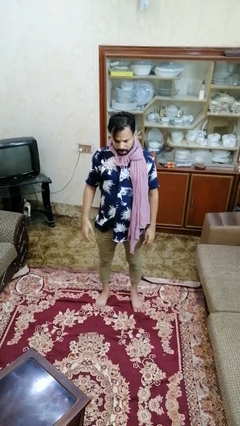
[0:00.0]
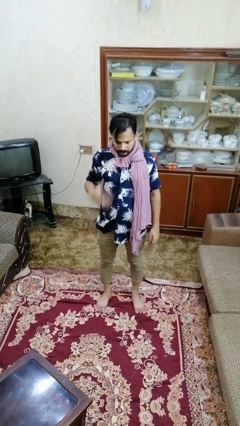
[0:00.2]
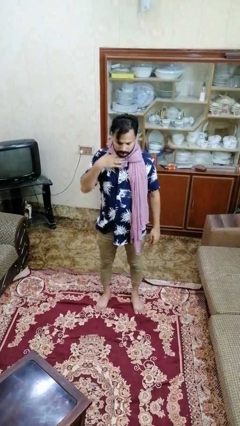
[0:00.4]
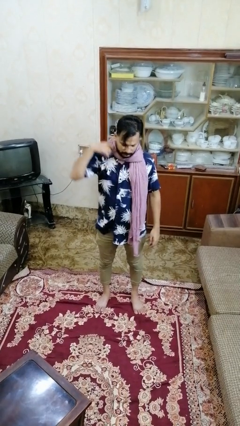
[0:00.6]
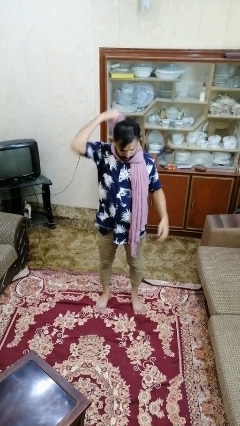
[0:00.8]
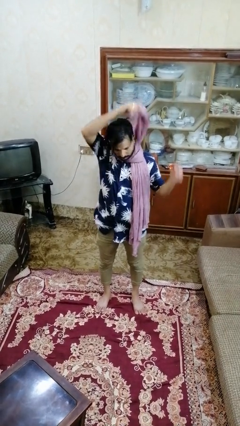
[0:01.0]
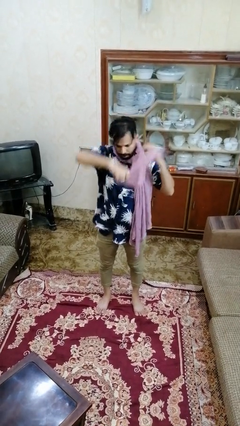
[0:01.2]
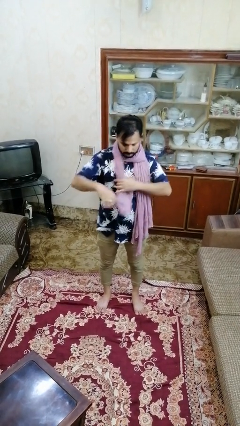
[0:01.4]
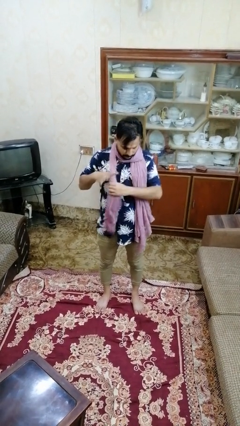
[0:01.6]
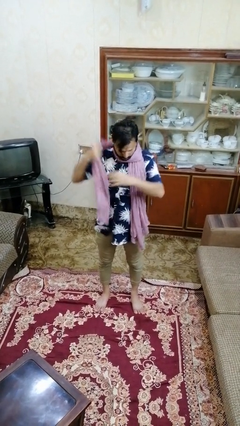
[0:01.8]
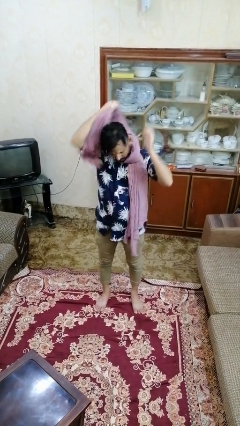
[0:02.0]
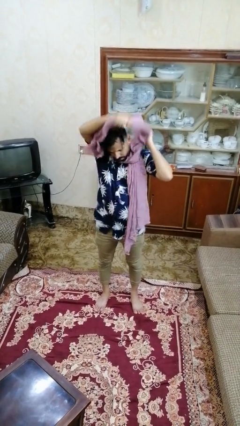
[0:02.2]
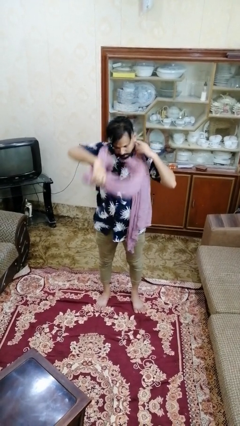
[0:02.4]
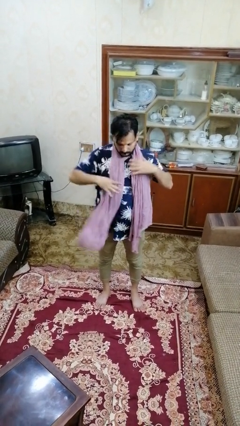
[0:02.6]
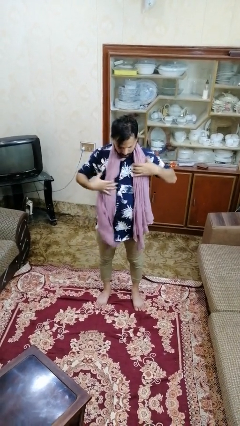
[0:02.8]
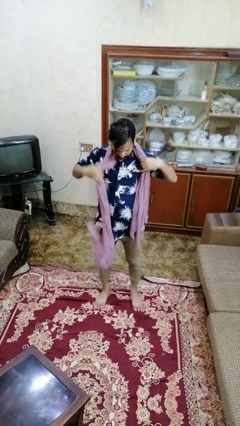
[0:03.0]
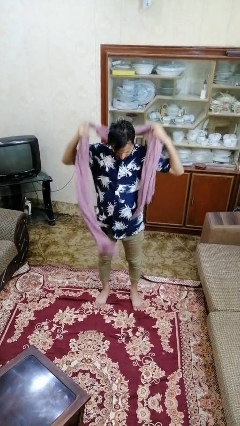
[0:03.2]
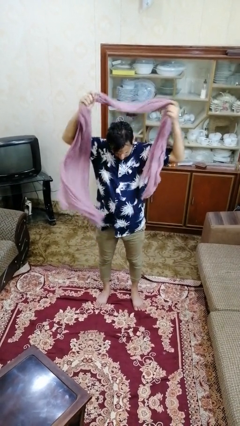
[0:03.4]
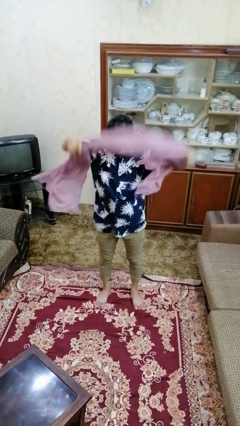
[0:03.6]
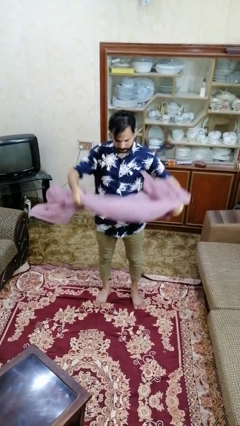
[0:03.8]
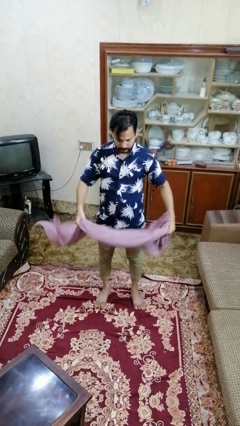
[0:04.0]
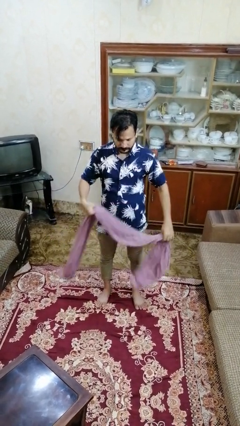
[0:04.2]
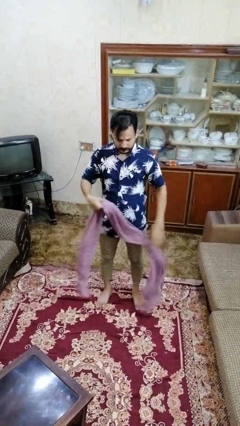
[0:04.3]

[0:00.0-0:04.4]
person takes off scarf

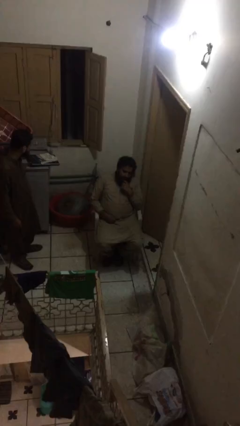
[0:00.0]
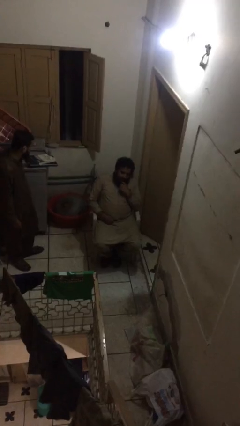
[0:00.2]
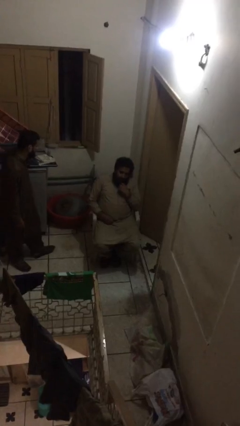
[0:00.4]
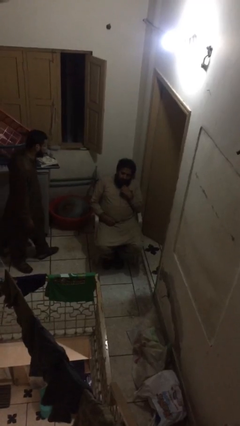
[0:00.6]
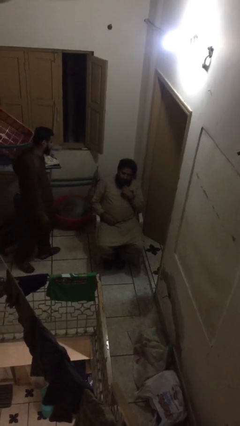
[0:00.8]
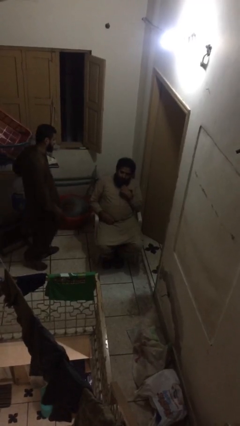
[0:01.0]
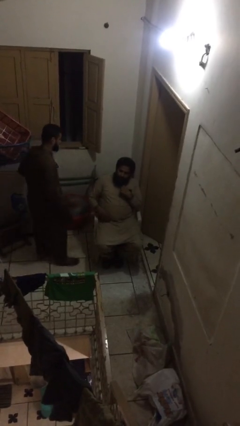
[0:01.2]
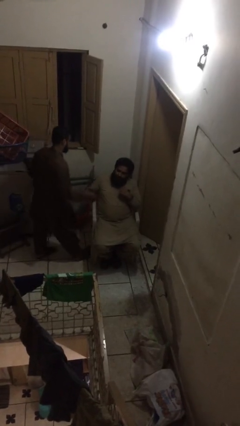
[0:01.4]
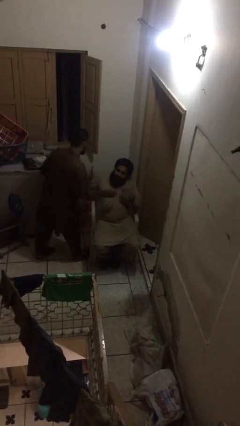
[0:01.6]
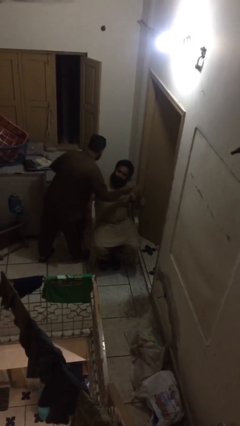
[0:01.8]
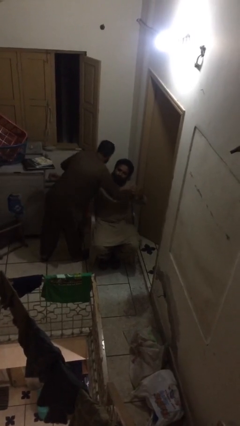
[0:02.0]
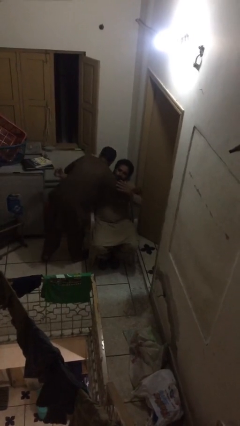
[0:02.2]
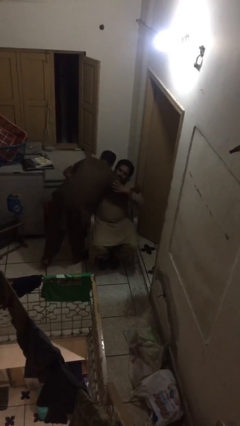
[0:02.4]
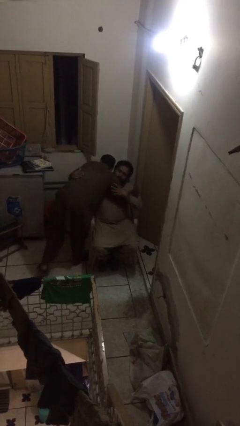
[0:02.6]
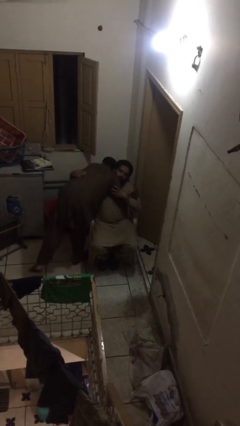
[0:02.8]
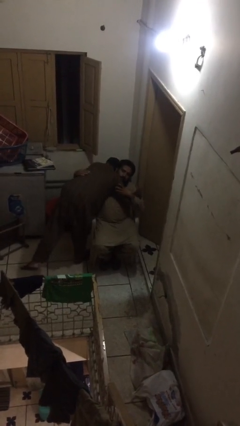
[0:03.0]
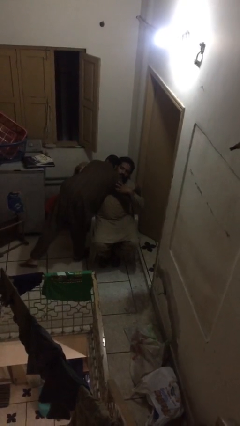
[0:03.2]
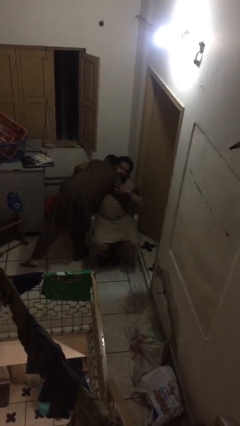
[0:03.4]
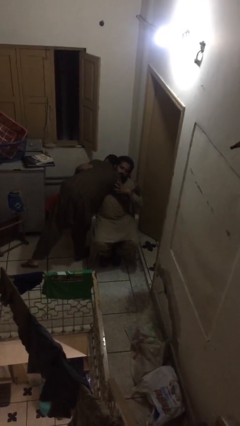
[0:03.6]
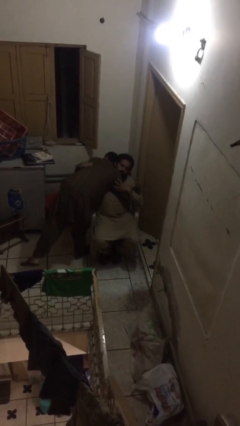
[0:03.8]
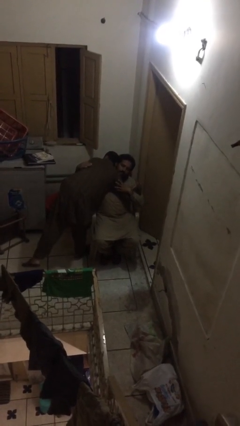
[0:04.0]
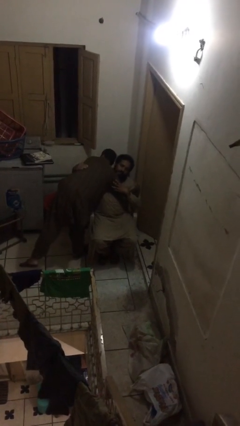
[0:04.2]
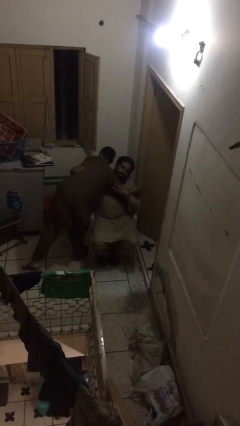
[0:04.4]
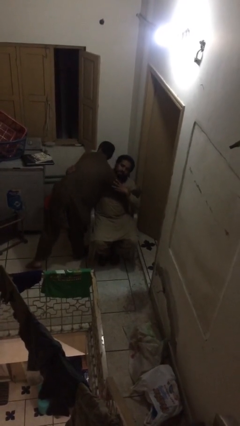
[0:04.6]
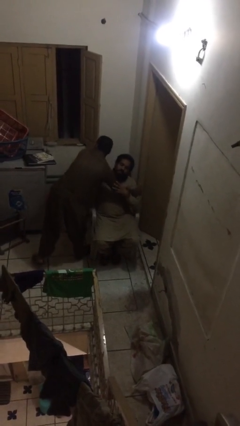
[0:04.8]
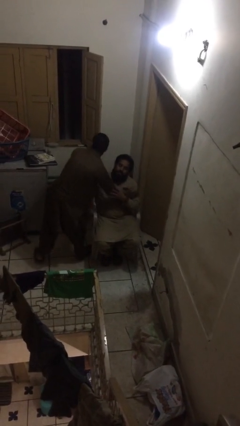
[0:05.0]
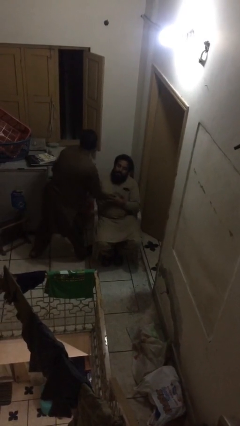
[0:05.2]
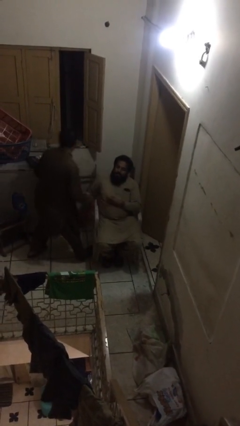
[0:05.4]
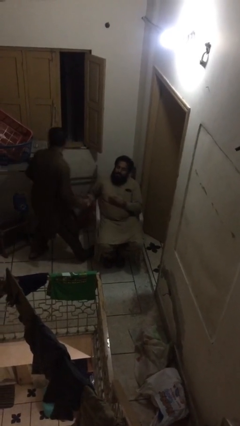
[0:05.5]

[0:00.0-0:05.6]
person embraces person

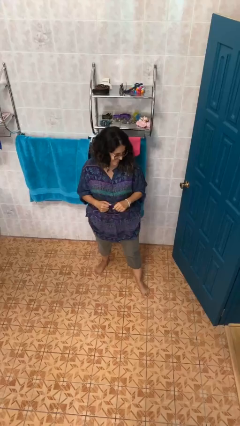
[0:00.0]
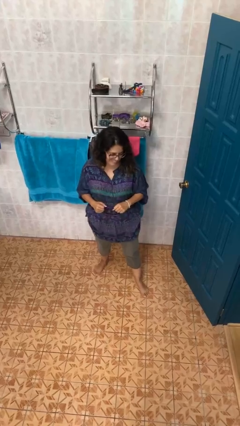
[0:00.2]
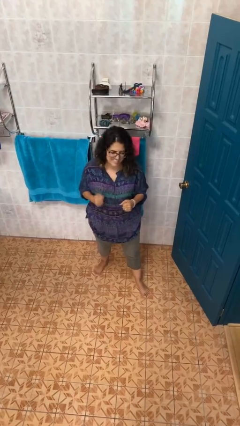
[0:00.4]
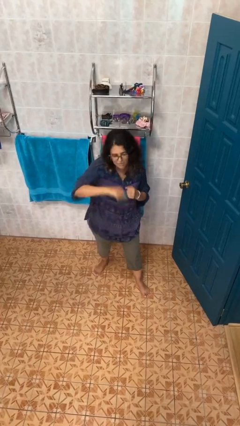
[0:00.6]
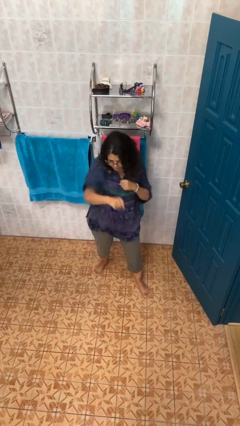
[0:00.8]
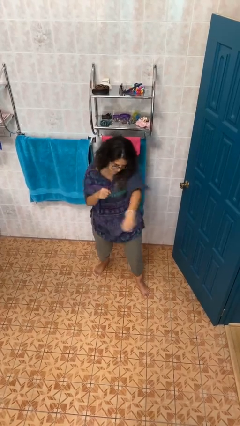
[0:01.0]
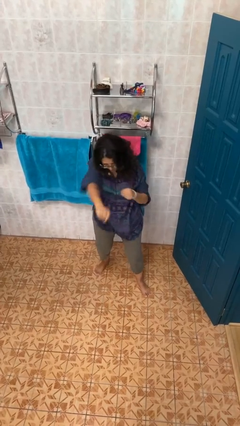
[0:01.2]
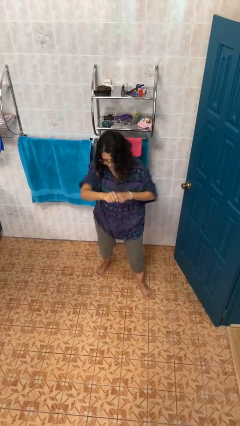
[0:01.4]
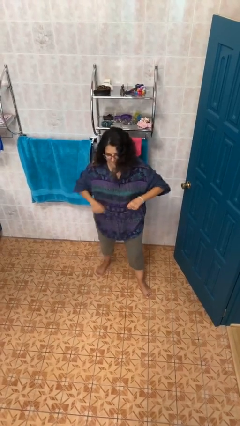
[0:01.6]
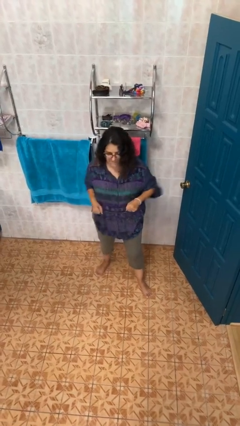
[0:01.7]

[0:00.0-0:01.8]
person punches

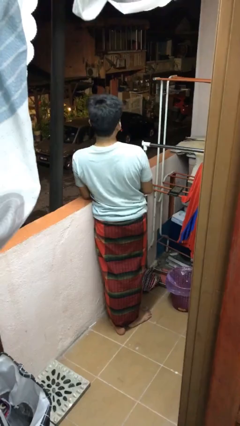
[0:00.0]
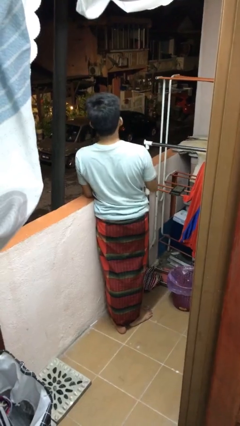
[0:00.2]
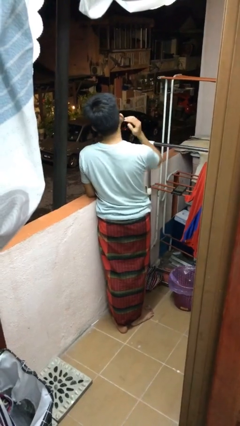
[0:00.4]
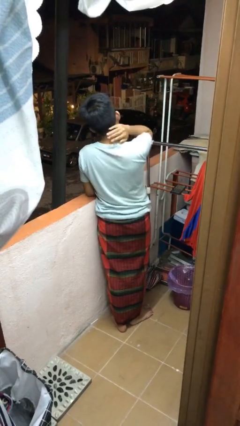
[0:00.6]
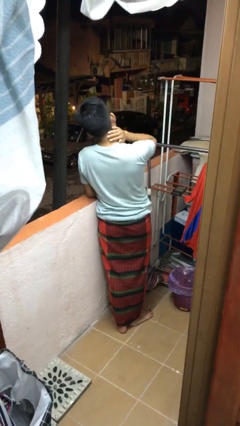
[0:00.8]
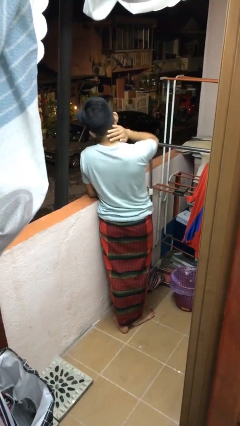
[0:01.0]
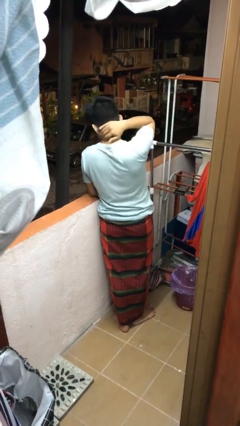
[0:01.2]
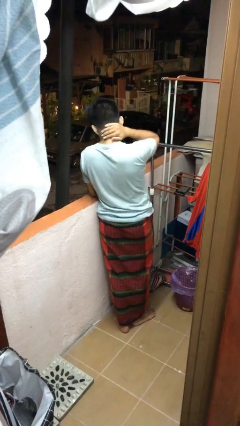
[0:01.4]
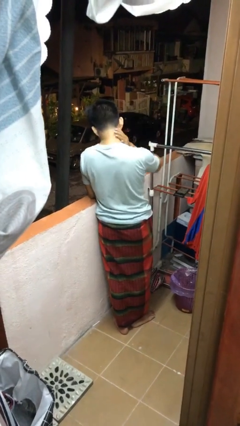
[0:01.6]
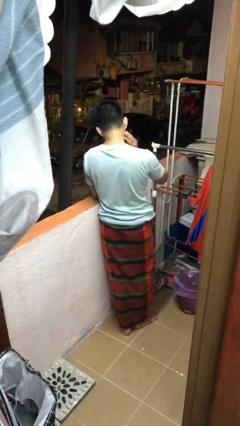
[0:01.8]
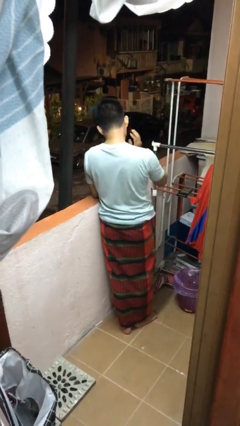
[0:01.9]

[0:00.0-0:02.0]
person rubs neck

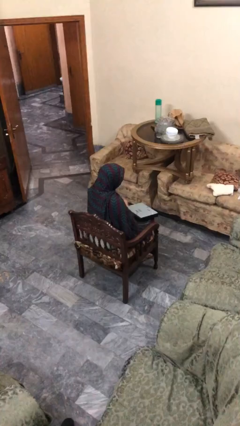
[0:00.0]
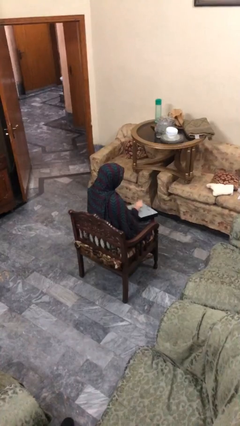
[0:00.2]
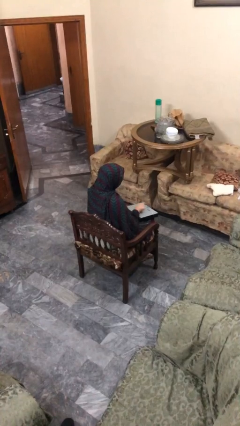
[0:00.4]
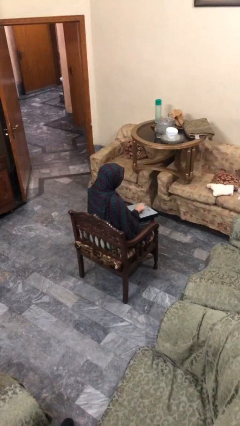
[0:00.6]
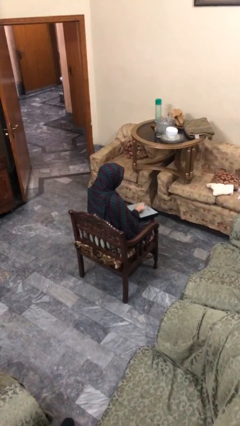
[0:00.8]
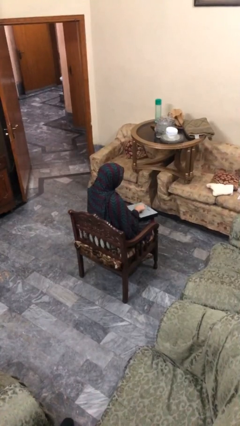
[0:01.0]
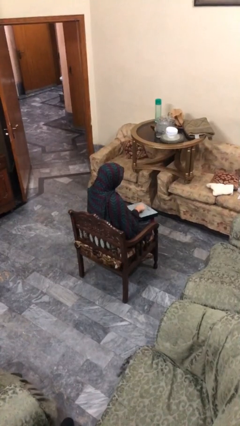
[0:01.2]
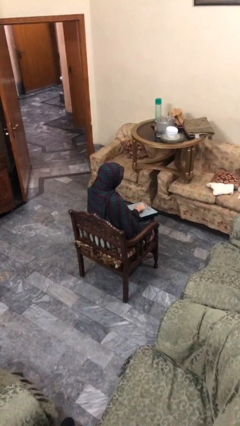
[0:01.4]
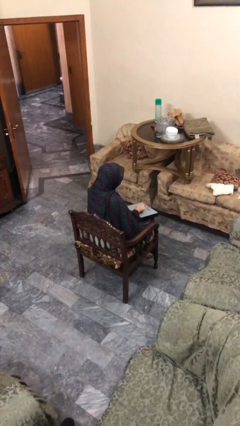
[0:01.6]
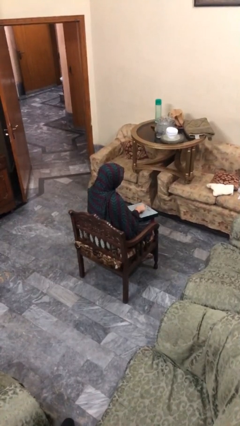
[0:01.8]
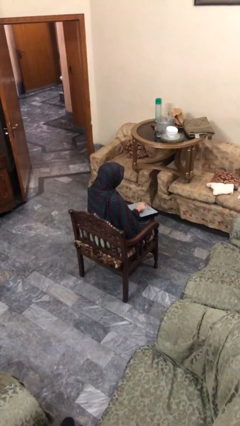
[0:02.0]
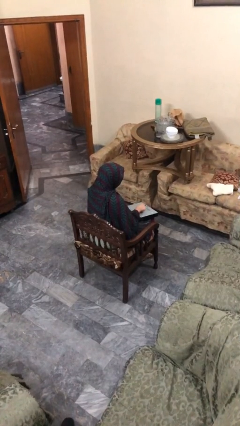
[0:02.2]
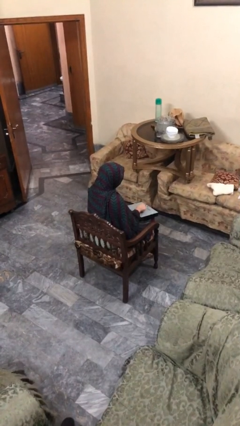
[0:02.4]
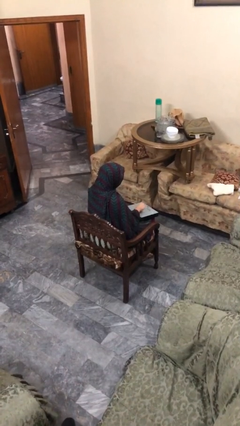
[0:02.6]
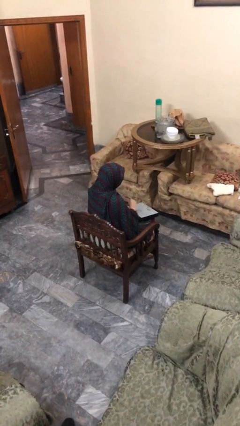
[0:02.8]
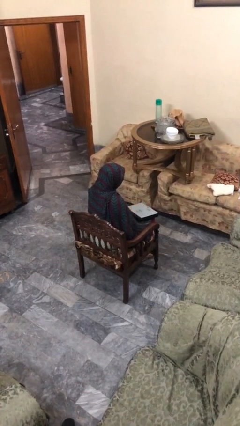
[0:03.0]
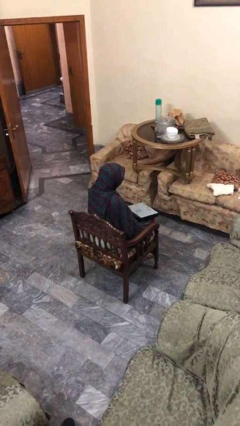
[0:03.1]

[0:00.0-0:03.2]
person taps object with finger

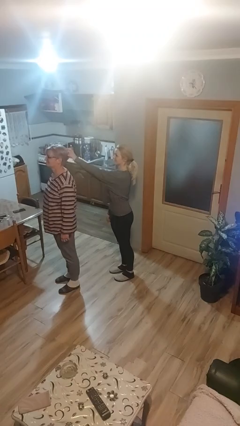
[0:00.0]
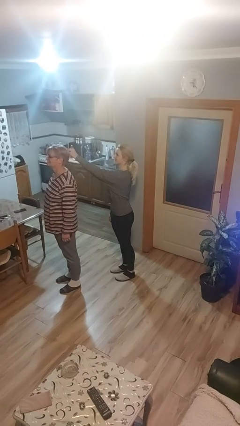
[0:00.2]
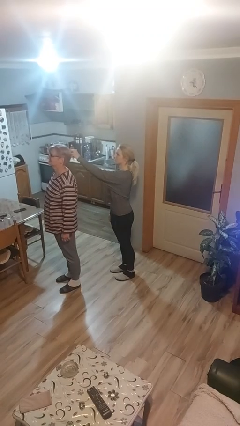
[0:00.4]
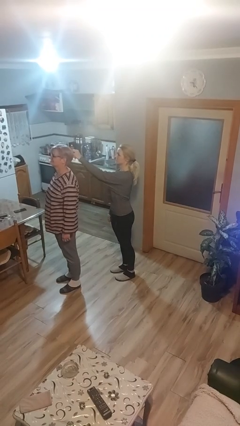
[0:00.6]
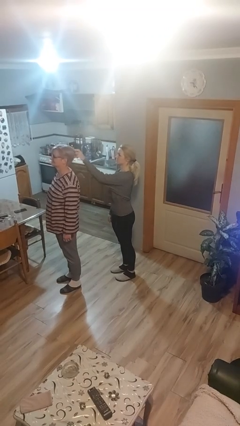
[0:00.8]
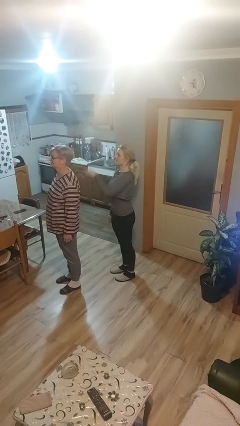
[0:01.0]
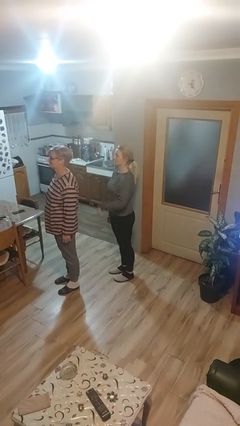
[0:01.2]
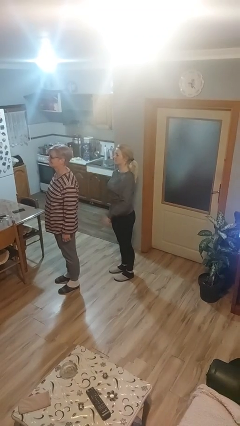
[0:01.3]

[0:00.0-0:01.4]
person grabs person by hair
